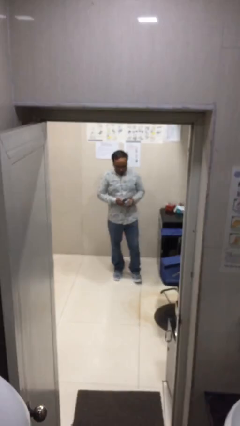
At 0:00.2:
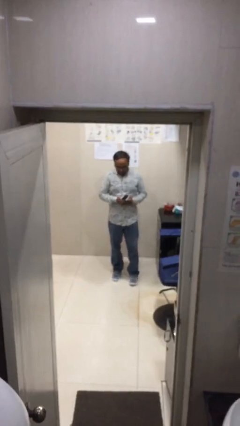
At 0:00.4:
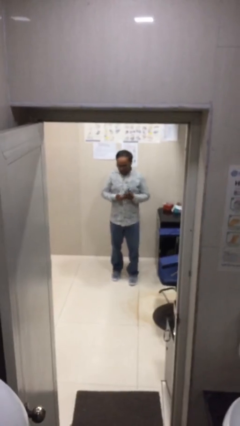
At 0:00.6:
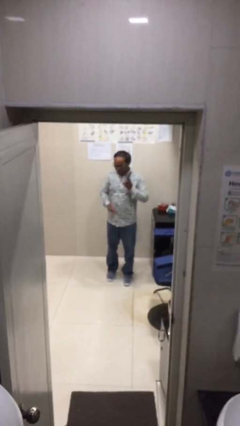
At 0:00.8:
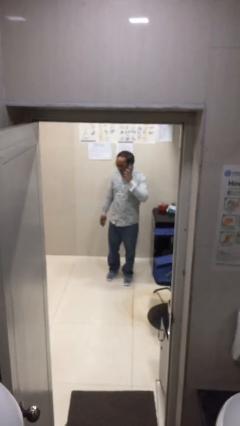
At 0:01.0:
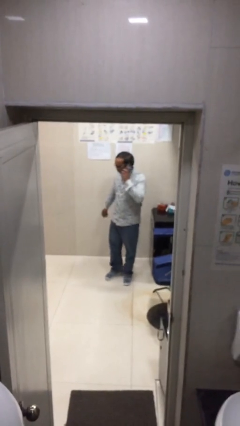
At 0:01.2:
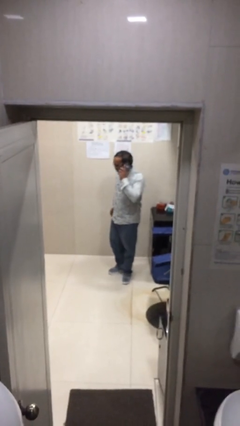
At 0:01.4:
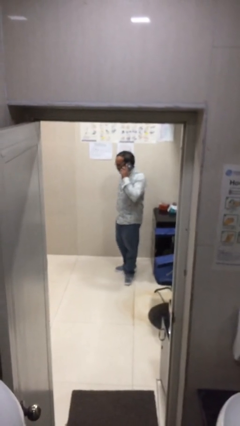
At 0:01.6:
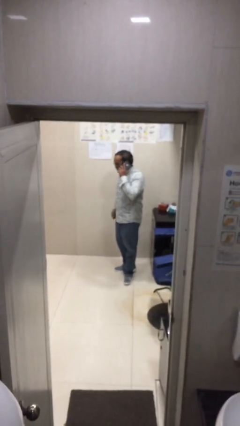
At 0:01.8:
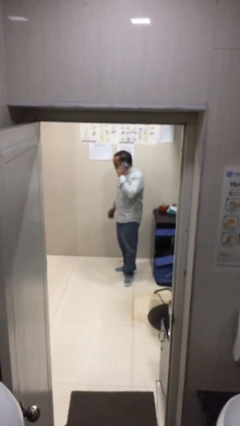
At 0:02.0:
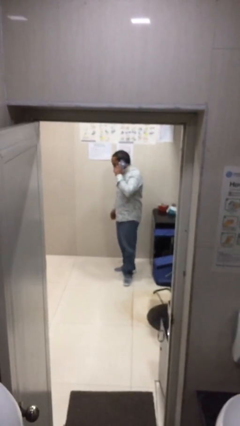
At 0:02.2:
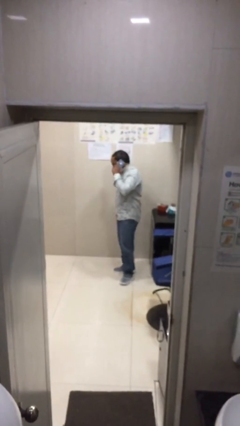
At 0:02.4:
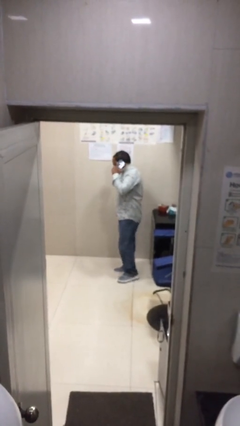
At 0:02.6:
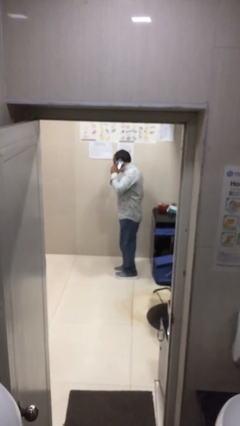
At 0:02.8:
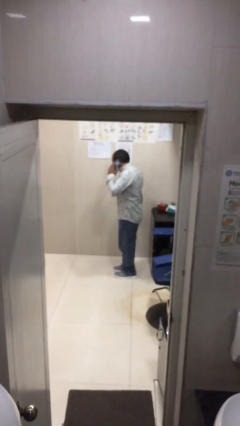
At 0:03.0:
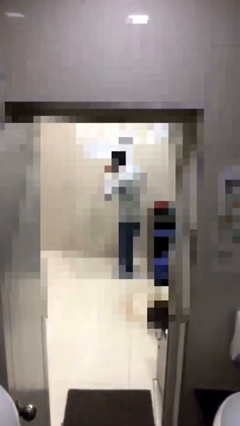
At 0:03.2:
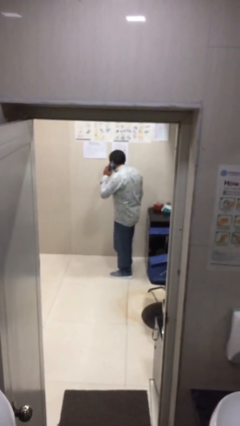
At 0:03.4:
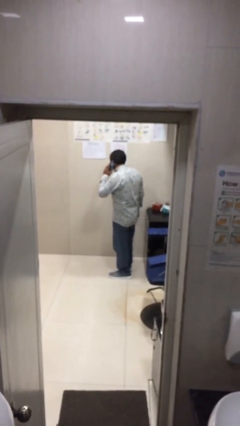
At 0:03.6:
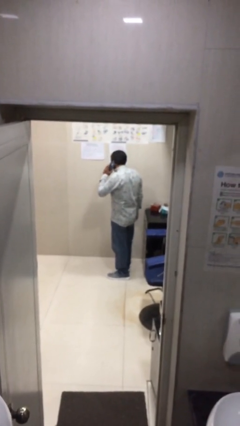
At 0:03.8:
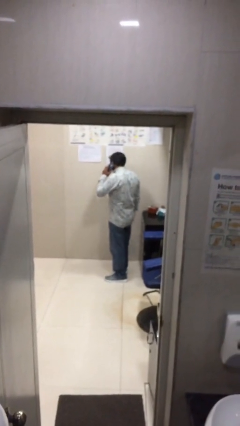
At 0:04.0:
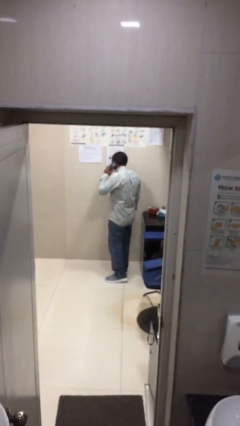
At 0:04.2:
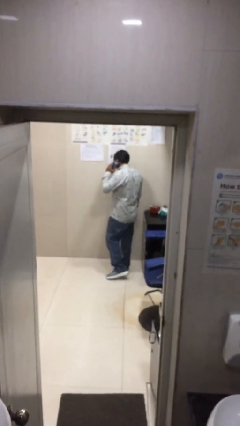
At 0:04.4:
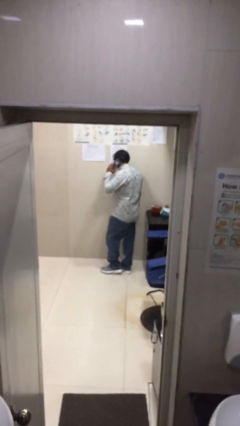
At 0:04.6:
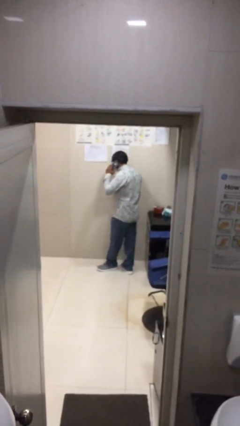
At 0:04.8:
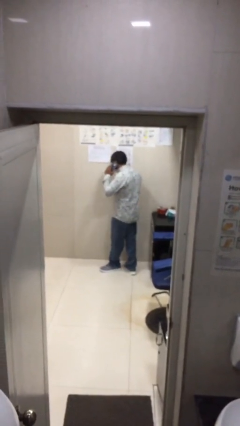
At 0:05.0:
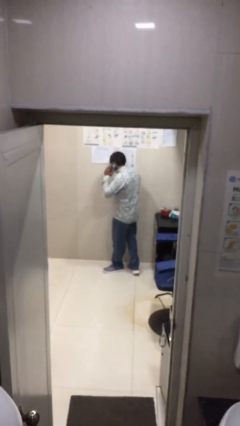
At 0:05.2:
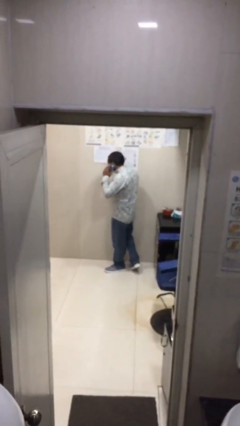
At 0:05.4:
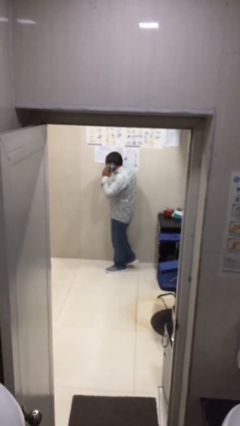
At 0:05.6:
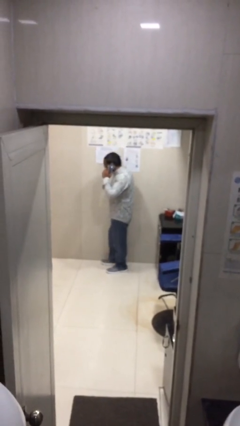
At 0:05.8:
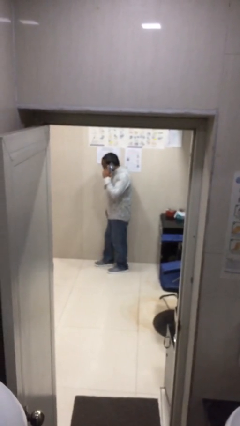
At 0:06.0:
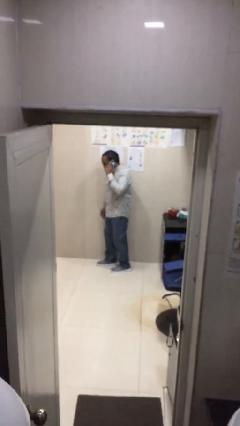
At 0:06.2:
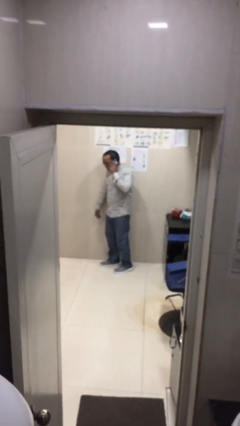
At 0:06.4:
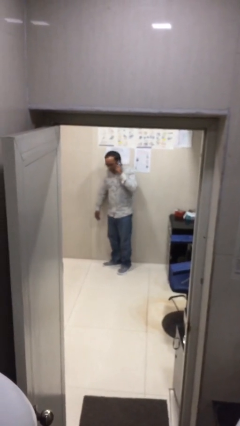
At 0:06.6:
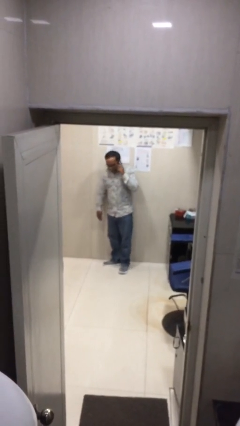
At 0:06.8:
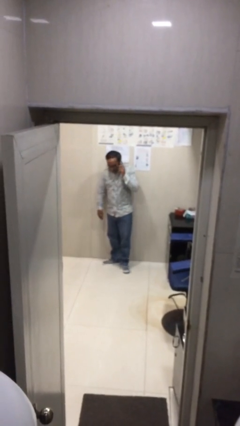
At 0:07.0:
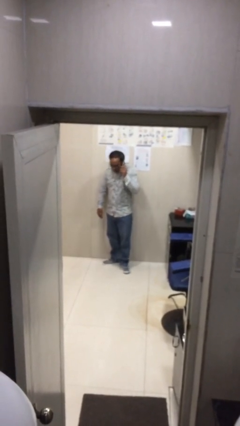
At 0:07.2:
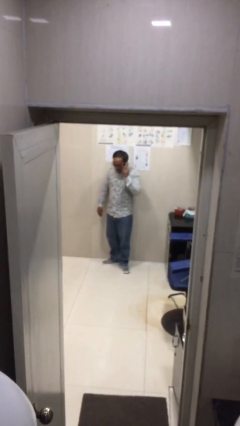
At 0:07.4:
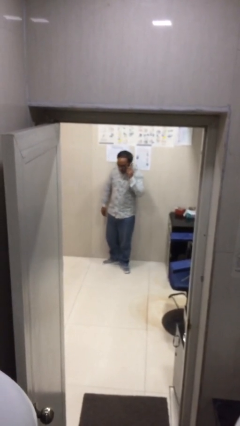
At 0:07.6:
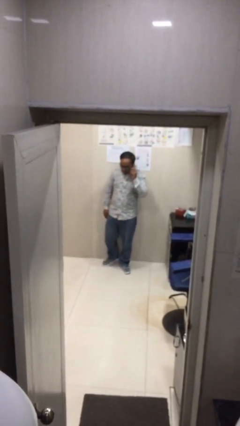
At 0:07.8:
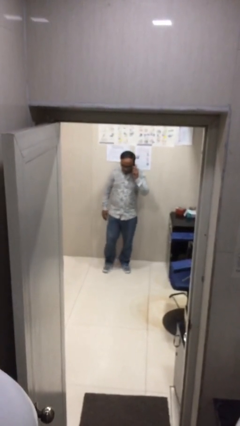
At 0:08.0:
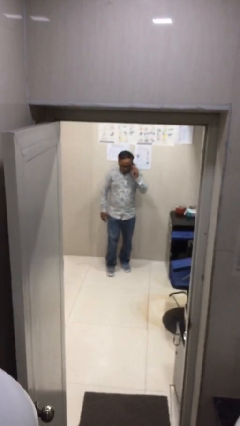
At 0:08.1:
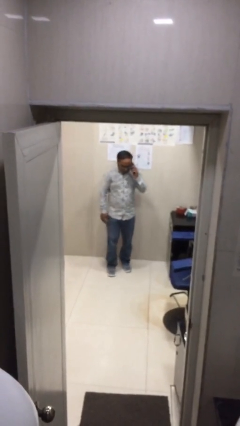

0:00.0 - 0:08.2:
person talks on phone

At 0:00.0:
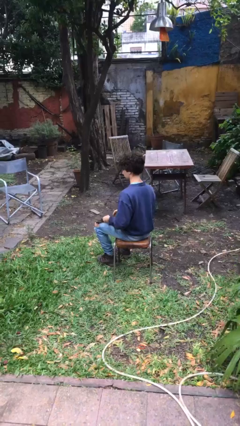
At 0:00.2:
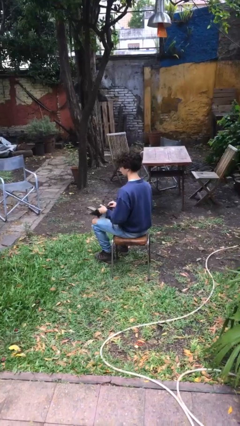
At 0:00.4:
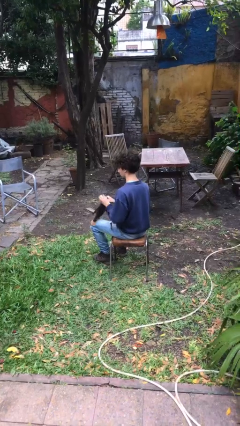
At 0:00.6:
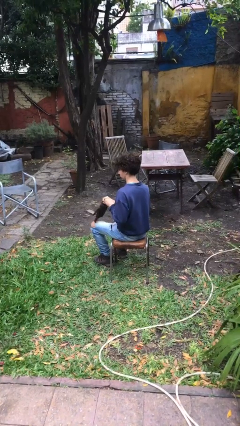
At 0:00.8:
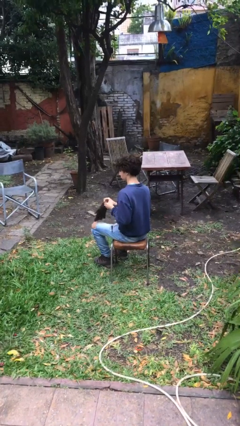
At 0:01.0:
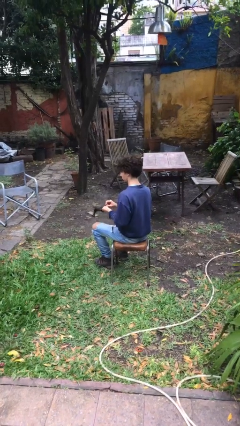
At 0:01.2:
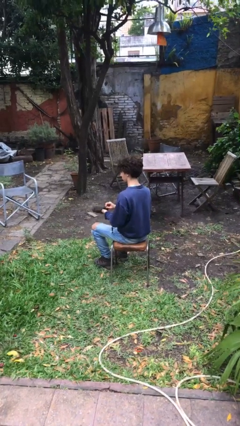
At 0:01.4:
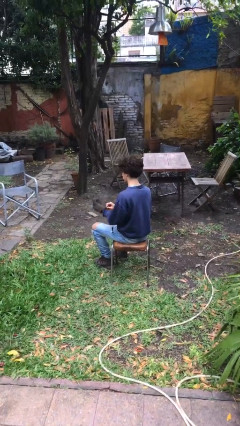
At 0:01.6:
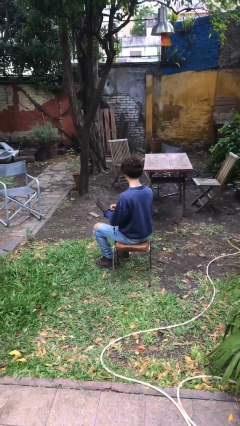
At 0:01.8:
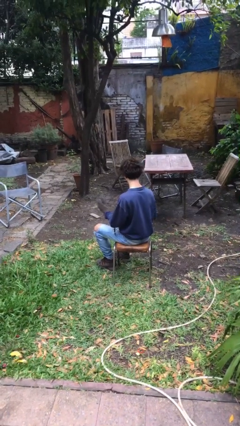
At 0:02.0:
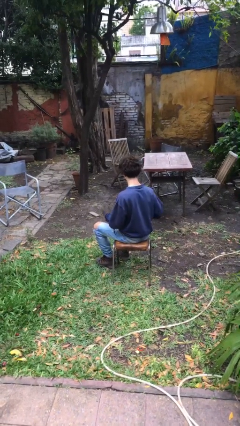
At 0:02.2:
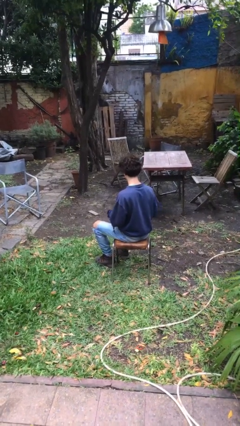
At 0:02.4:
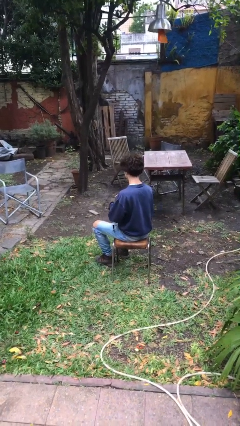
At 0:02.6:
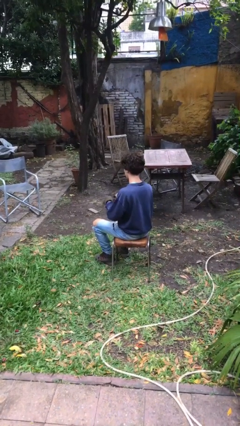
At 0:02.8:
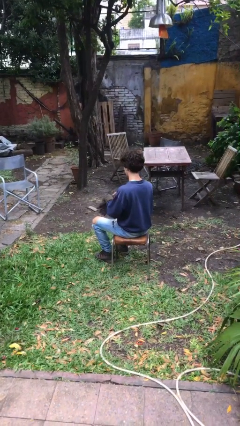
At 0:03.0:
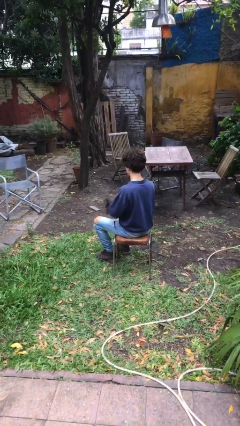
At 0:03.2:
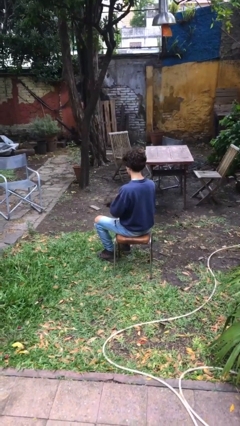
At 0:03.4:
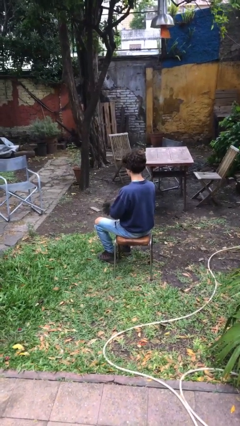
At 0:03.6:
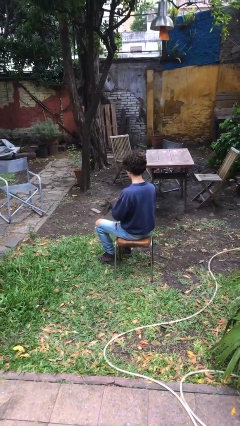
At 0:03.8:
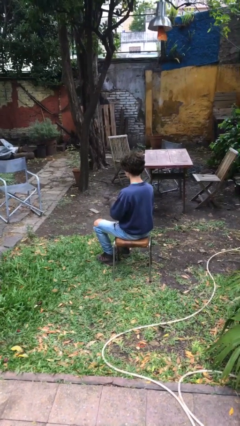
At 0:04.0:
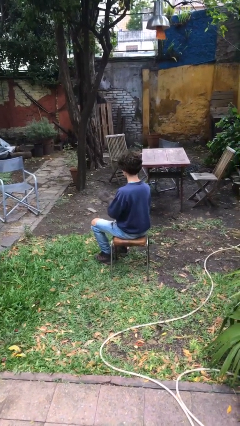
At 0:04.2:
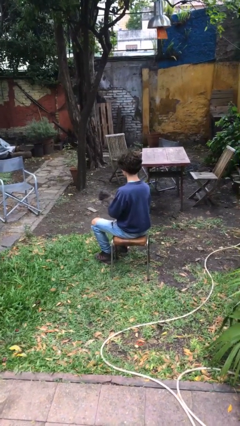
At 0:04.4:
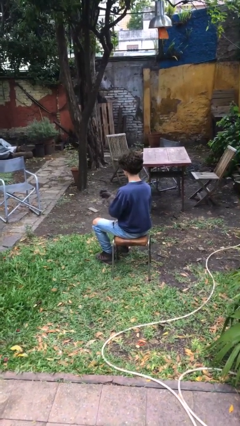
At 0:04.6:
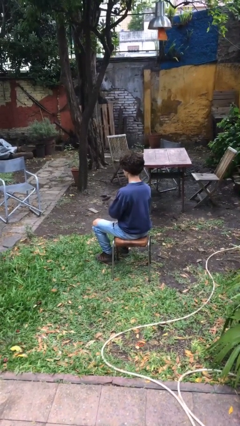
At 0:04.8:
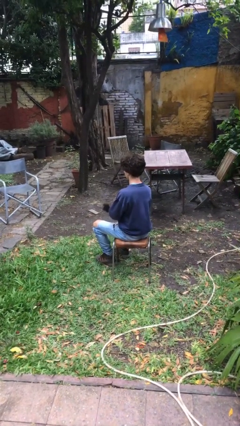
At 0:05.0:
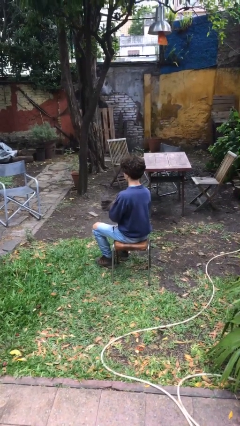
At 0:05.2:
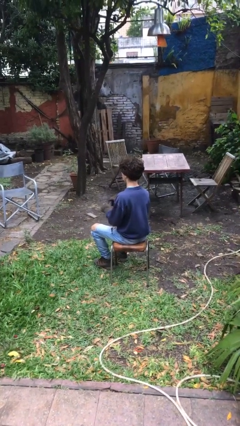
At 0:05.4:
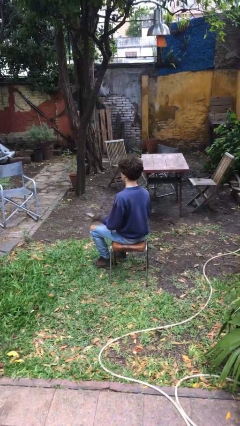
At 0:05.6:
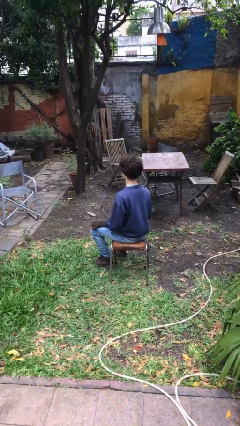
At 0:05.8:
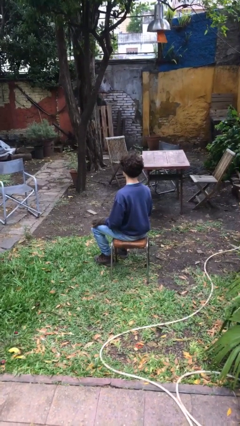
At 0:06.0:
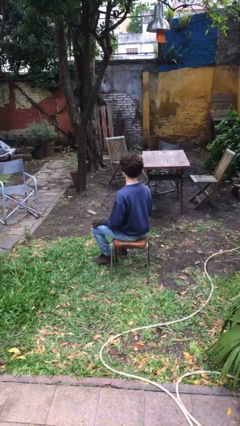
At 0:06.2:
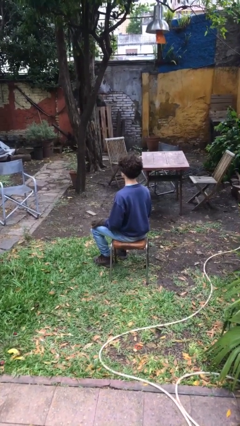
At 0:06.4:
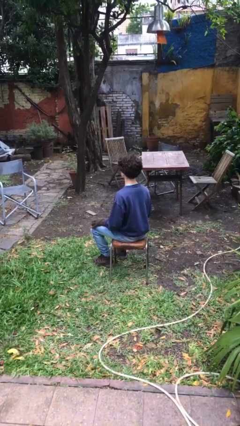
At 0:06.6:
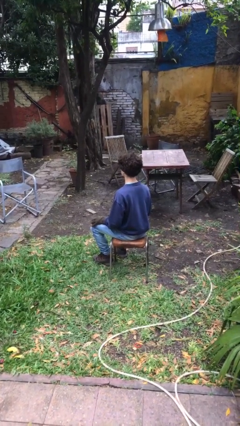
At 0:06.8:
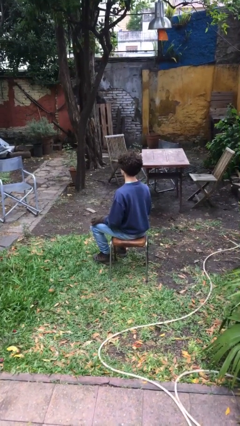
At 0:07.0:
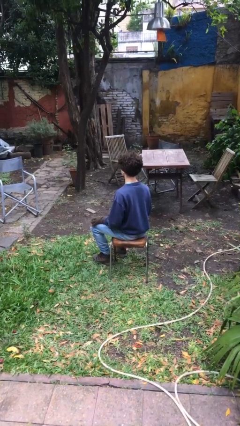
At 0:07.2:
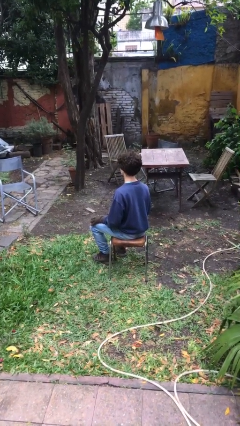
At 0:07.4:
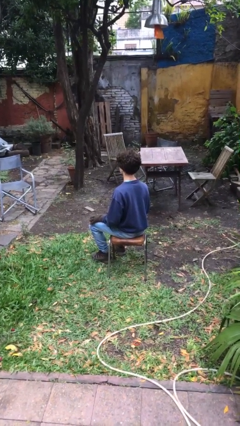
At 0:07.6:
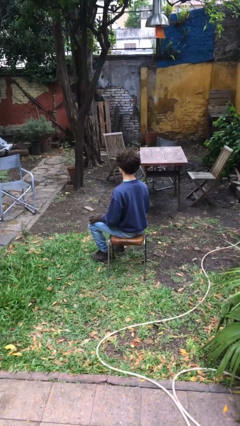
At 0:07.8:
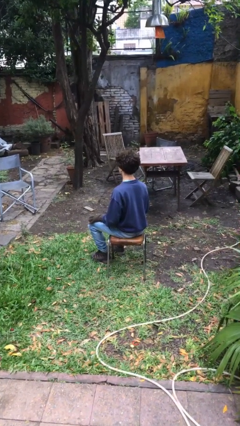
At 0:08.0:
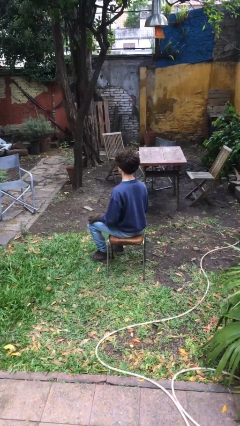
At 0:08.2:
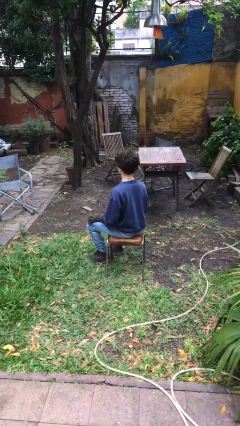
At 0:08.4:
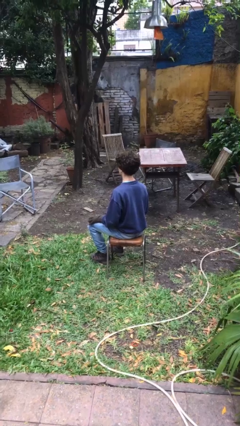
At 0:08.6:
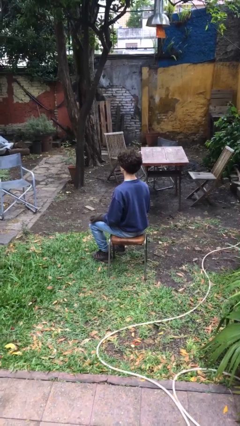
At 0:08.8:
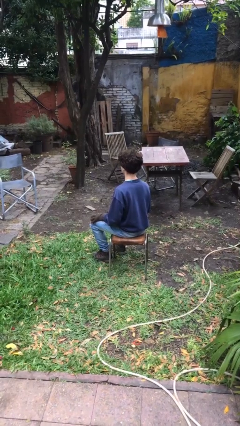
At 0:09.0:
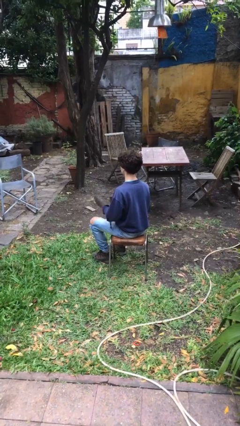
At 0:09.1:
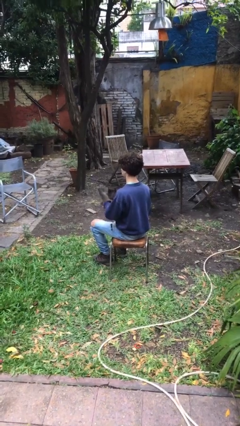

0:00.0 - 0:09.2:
person puts on gloves

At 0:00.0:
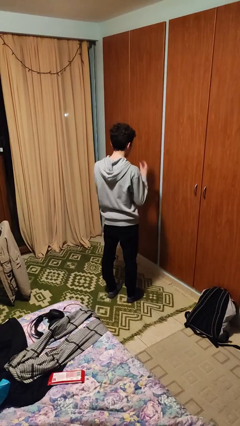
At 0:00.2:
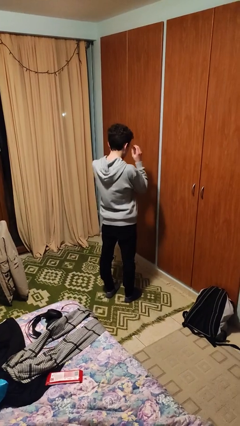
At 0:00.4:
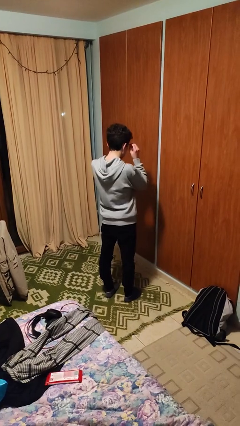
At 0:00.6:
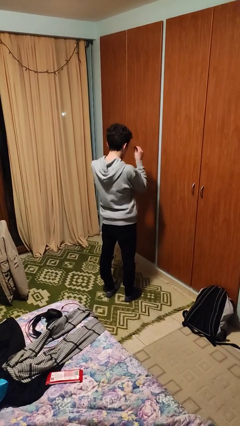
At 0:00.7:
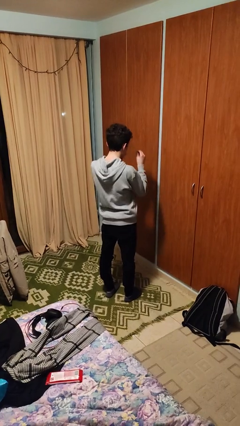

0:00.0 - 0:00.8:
person takes off glasses
